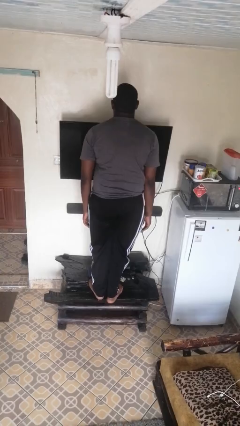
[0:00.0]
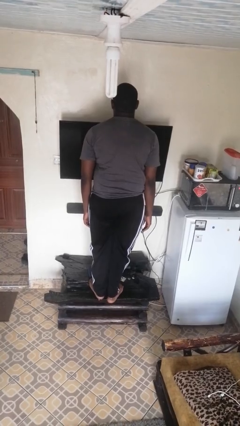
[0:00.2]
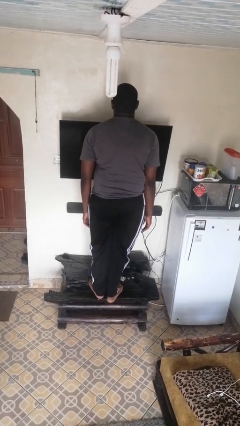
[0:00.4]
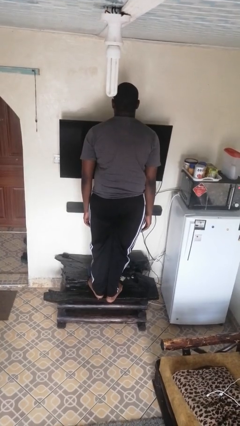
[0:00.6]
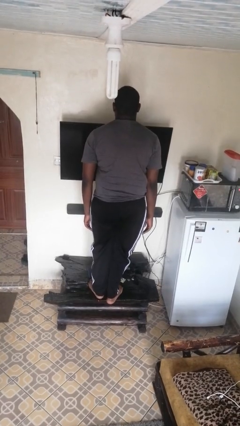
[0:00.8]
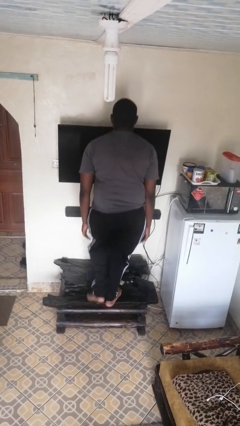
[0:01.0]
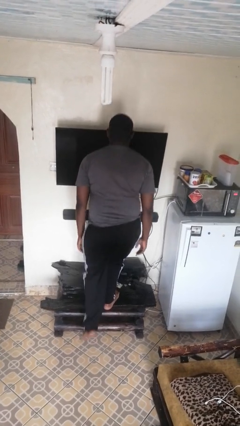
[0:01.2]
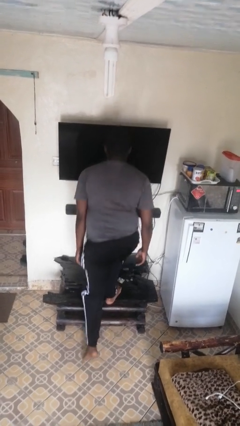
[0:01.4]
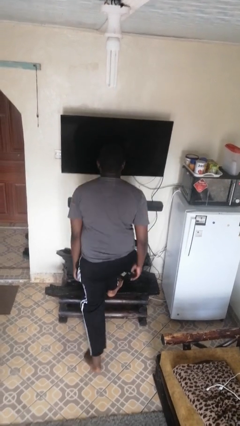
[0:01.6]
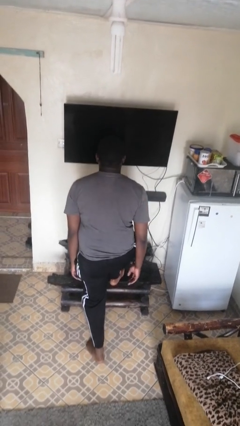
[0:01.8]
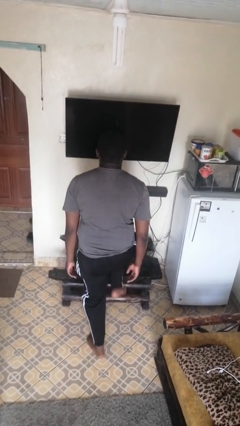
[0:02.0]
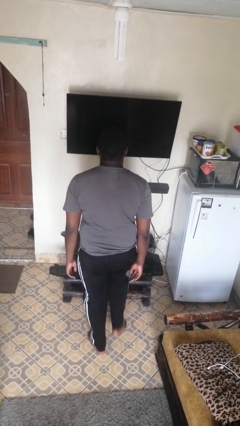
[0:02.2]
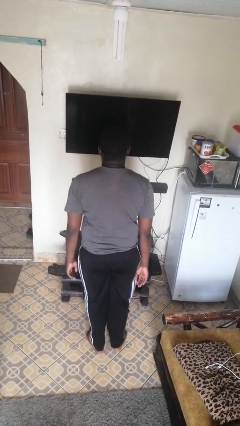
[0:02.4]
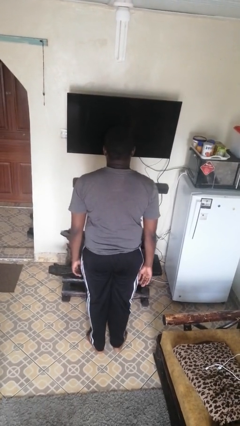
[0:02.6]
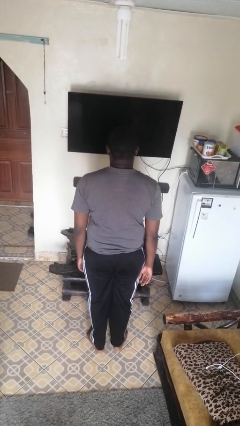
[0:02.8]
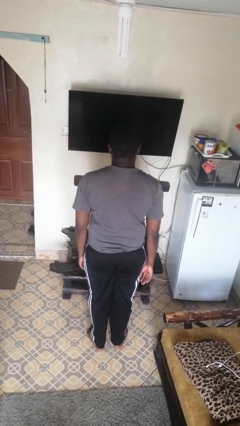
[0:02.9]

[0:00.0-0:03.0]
person climbs off table

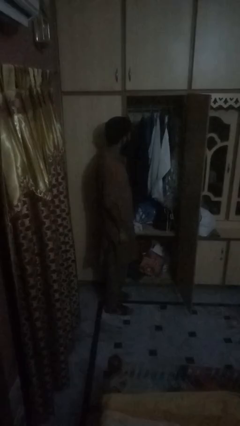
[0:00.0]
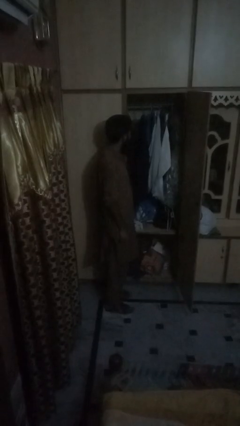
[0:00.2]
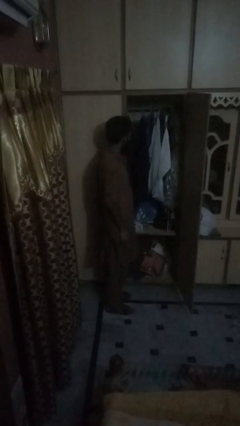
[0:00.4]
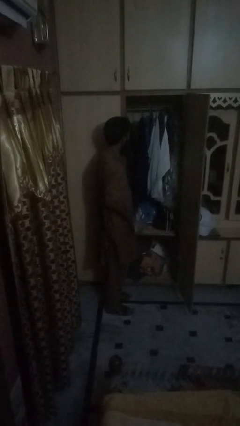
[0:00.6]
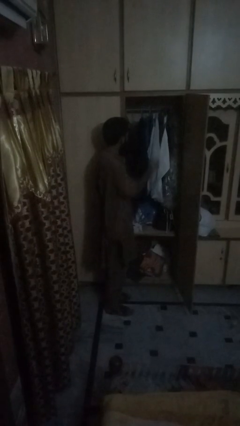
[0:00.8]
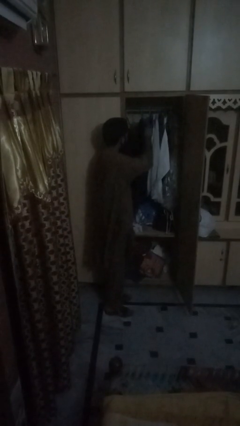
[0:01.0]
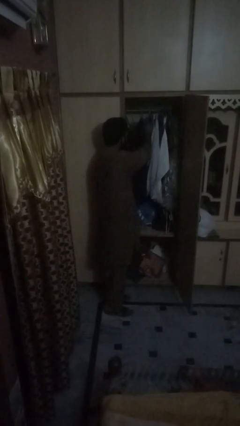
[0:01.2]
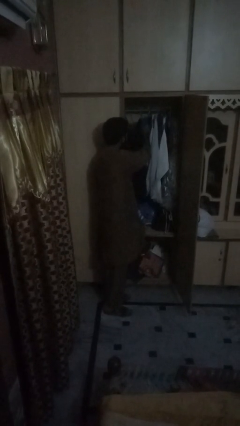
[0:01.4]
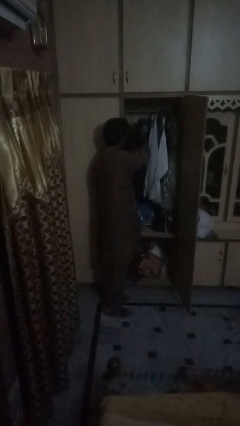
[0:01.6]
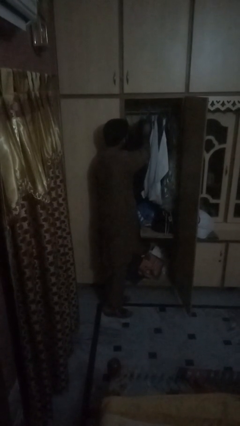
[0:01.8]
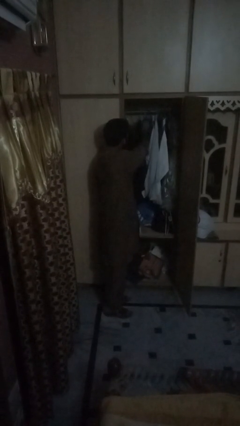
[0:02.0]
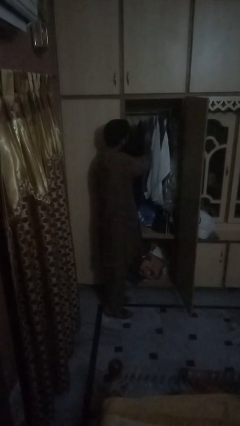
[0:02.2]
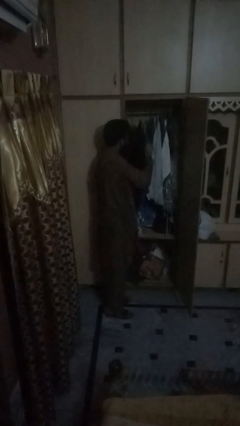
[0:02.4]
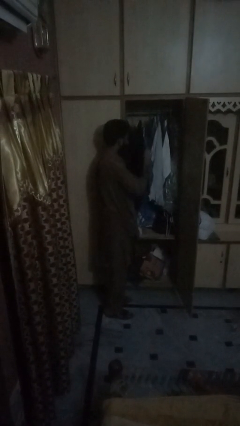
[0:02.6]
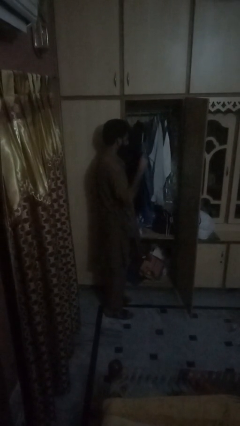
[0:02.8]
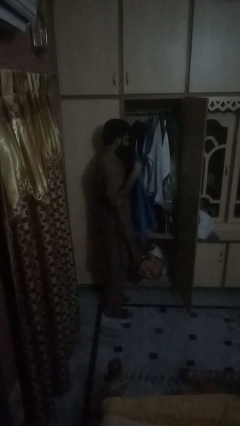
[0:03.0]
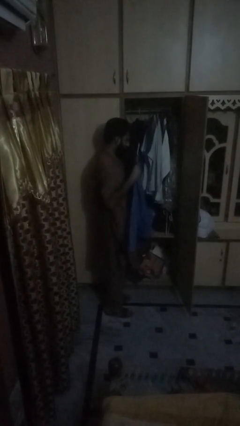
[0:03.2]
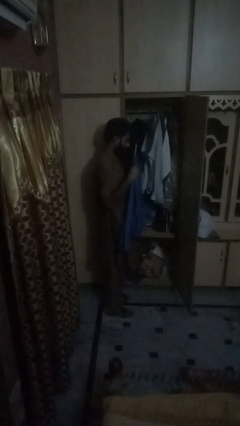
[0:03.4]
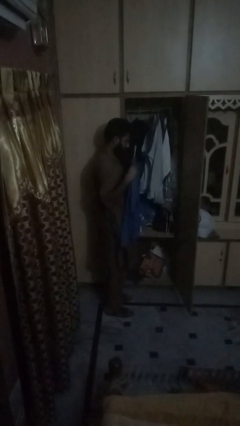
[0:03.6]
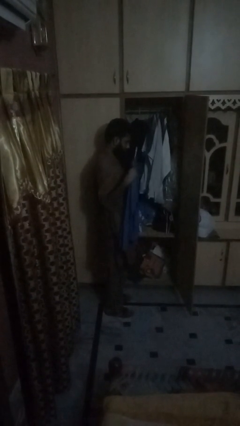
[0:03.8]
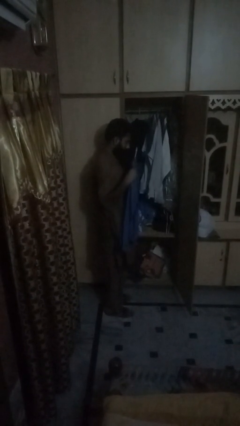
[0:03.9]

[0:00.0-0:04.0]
person puts clothes into dresser

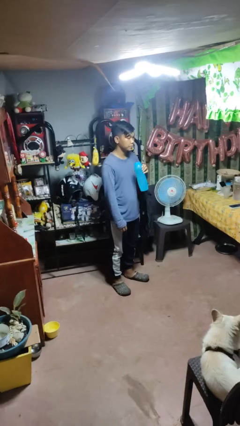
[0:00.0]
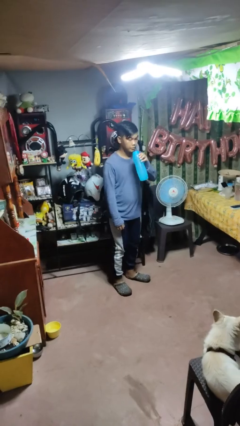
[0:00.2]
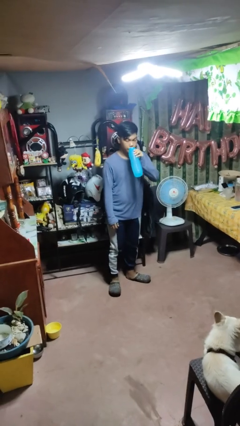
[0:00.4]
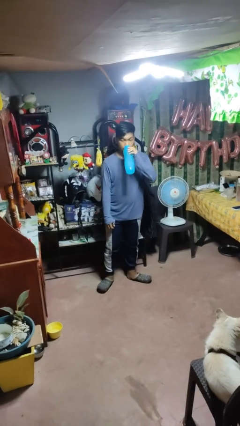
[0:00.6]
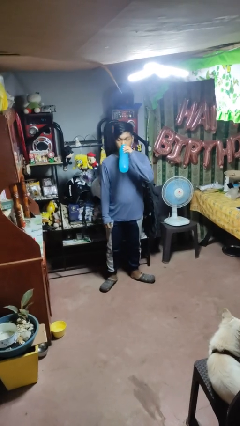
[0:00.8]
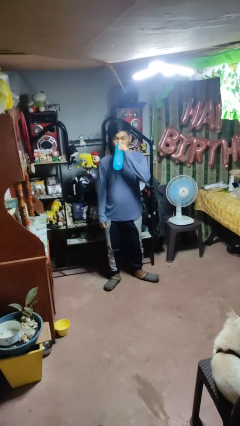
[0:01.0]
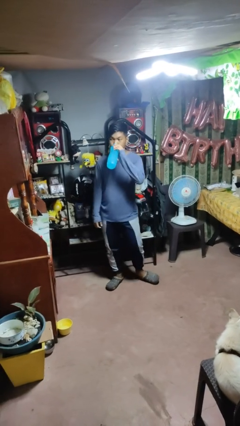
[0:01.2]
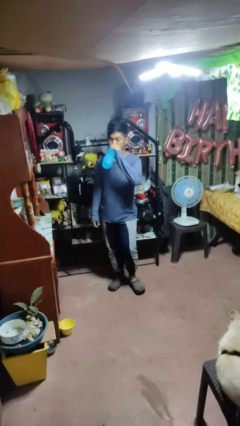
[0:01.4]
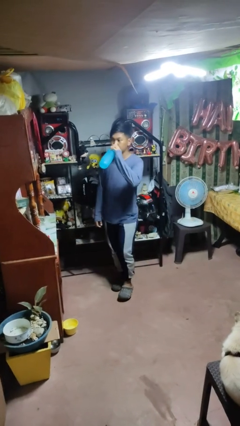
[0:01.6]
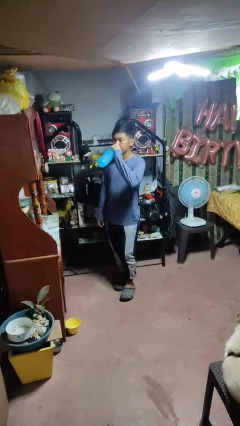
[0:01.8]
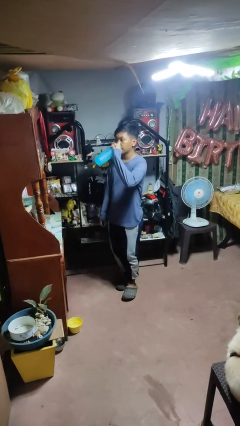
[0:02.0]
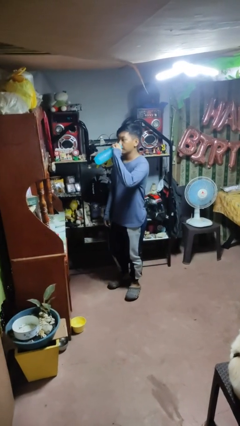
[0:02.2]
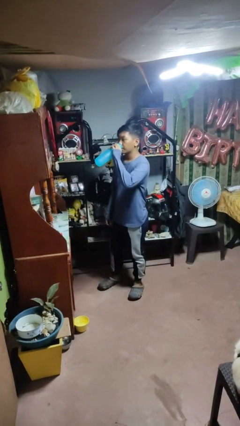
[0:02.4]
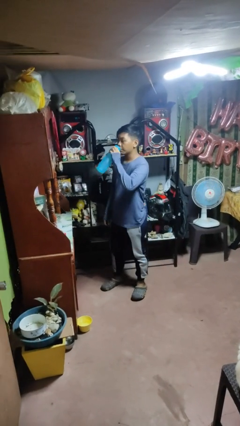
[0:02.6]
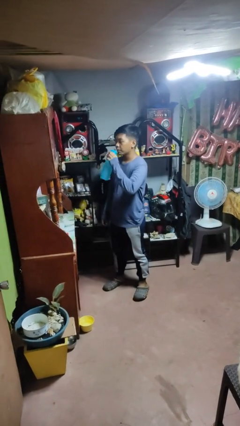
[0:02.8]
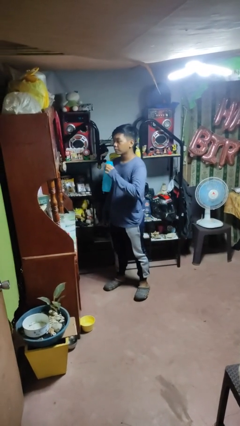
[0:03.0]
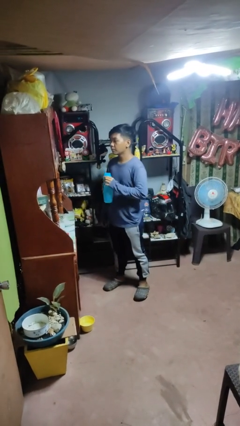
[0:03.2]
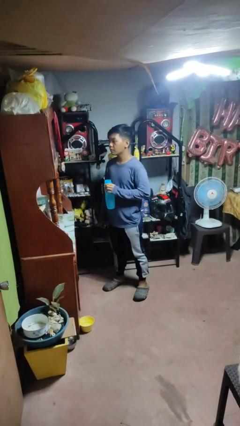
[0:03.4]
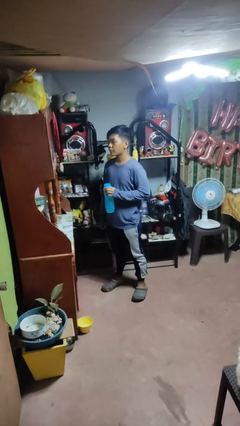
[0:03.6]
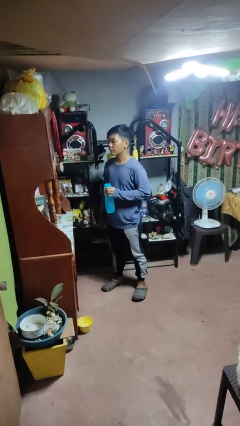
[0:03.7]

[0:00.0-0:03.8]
person drinks from bottle

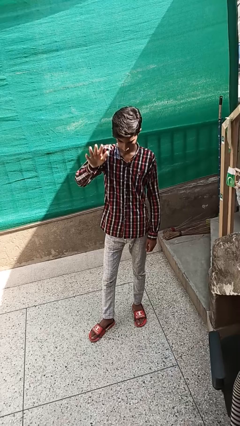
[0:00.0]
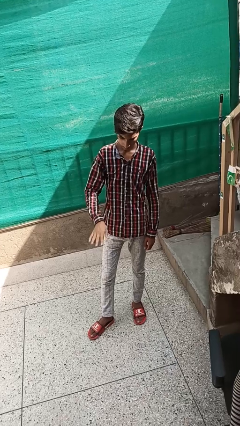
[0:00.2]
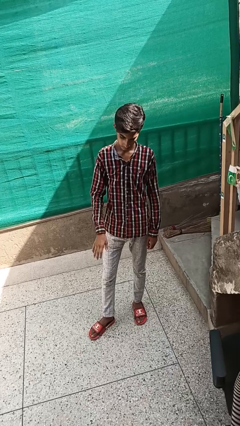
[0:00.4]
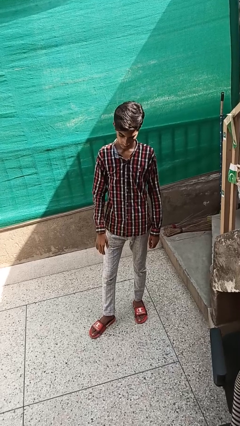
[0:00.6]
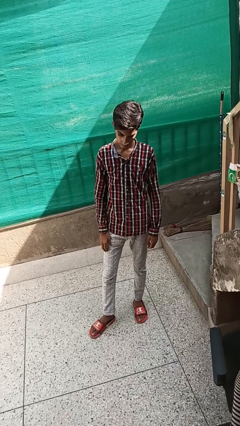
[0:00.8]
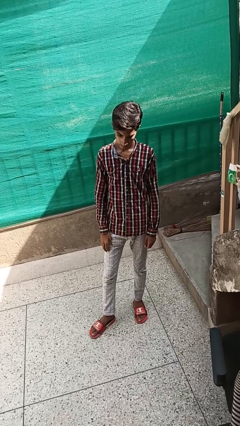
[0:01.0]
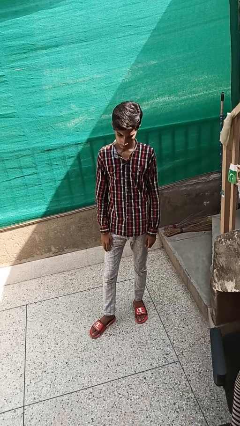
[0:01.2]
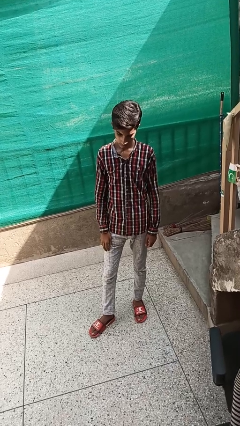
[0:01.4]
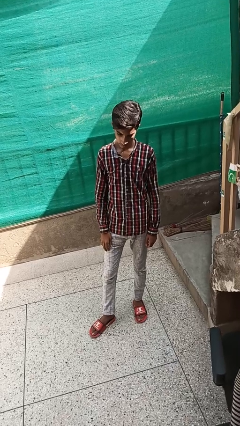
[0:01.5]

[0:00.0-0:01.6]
person gestures swipe down

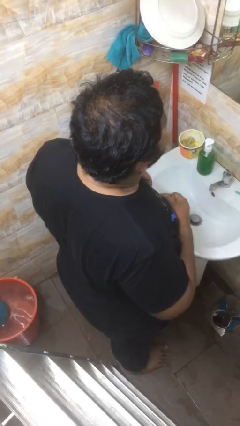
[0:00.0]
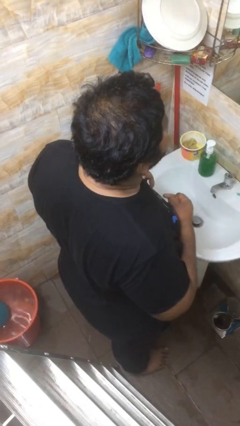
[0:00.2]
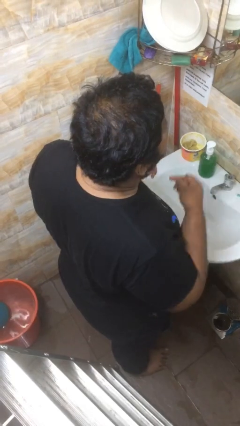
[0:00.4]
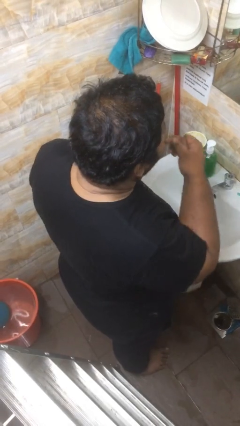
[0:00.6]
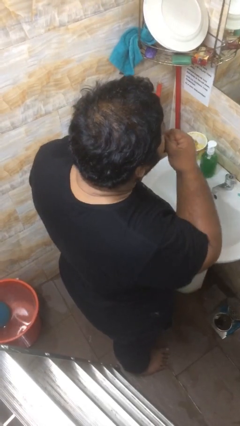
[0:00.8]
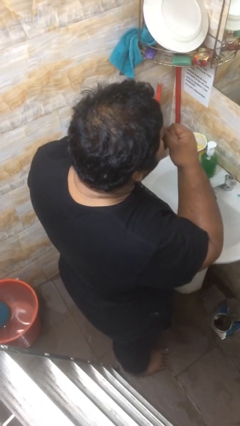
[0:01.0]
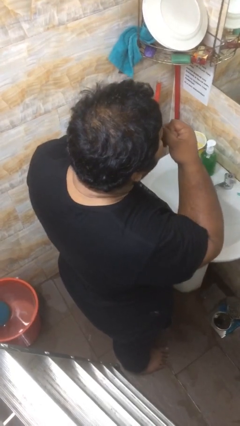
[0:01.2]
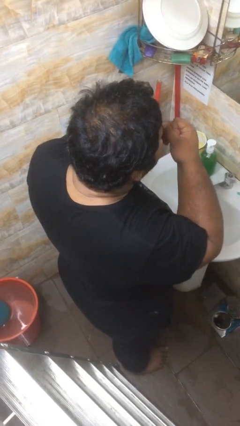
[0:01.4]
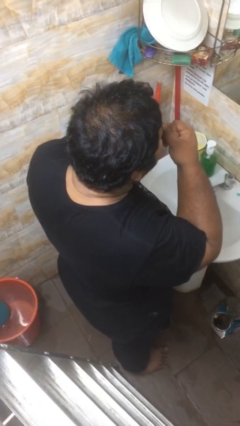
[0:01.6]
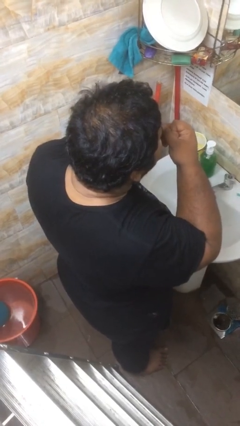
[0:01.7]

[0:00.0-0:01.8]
person flosses

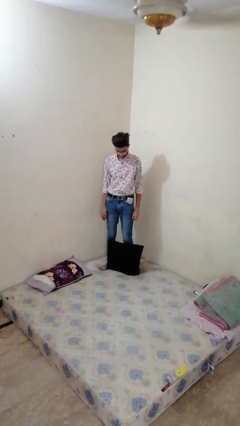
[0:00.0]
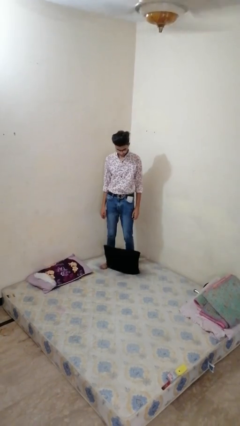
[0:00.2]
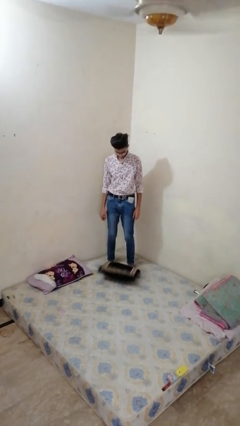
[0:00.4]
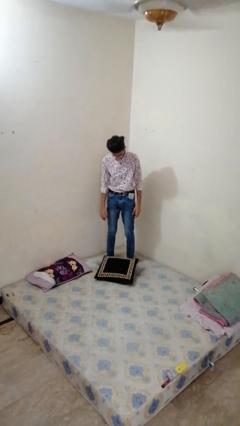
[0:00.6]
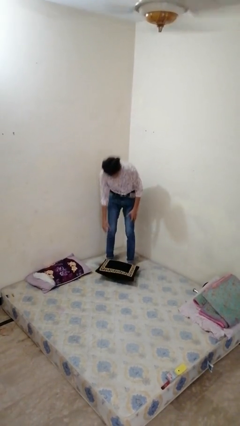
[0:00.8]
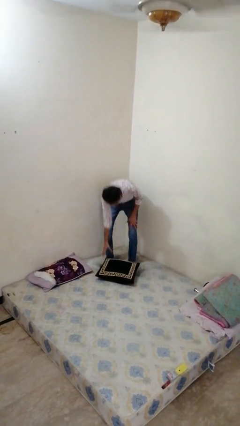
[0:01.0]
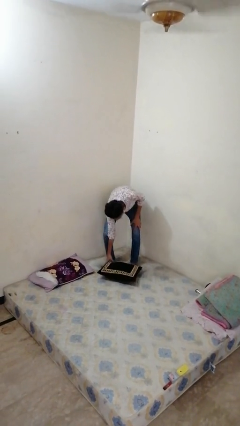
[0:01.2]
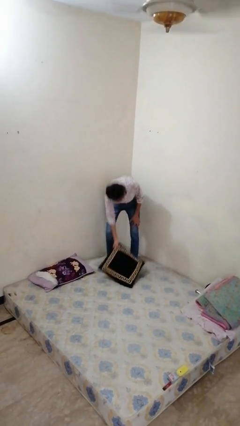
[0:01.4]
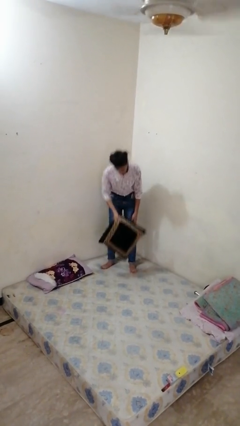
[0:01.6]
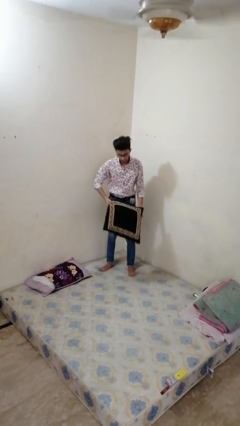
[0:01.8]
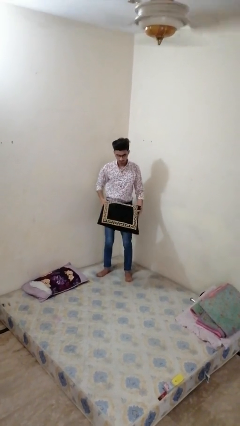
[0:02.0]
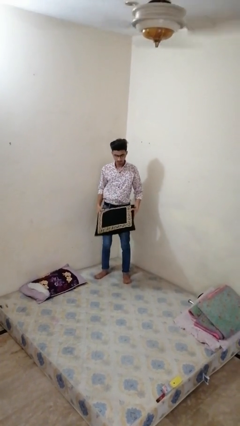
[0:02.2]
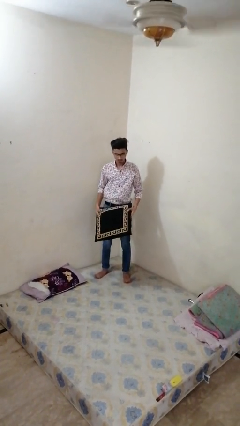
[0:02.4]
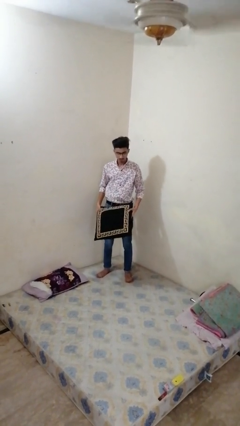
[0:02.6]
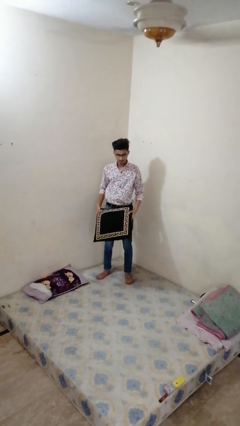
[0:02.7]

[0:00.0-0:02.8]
person picks up object from bed
